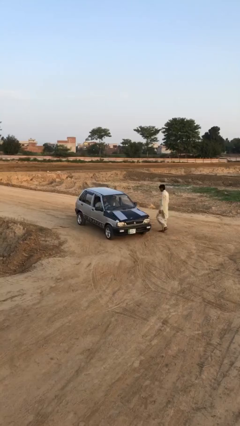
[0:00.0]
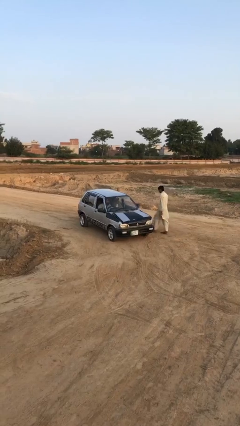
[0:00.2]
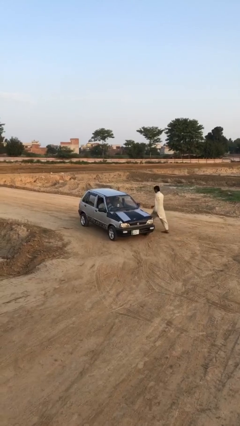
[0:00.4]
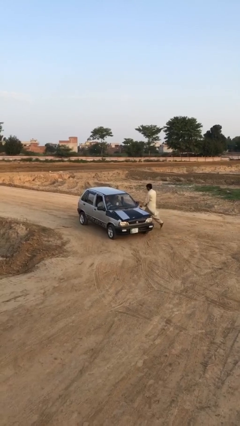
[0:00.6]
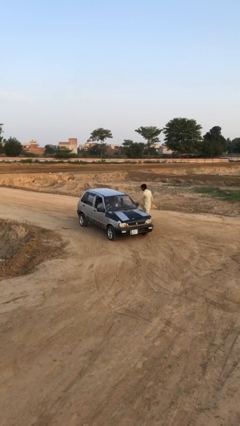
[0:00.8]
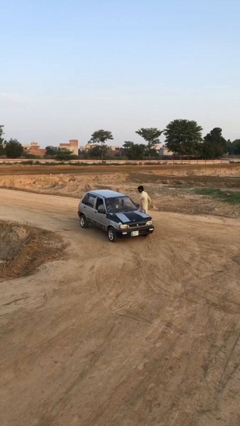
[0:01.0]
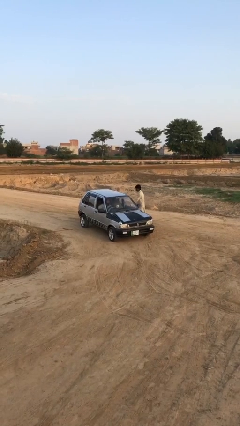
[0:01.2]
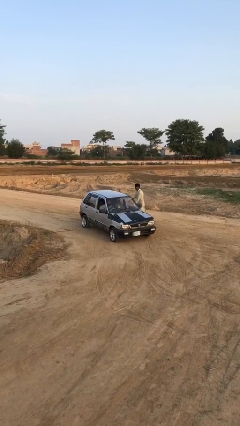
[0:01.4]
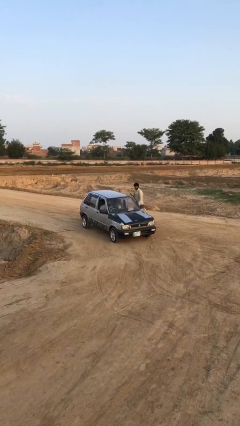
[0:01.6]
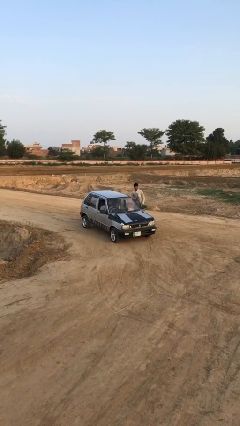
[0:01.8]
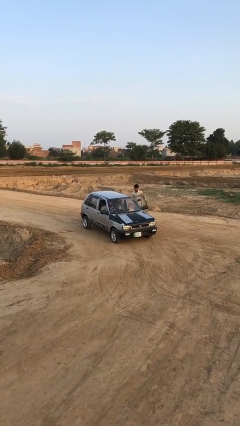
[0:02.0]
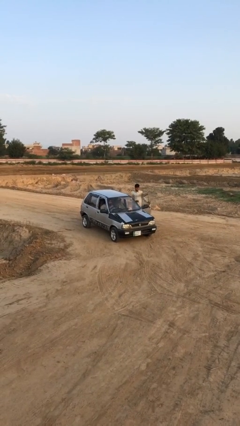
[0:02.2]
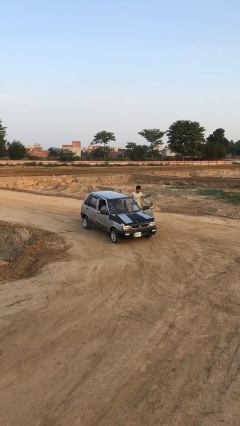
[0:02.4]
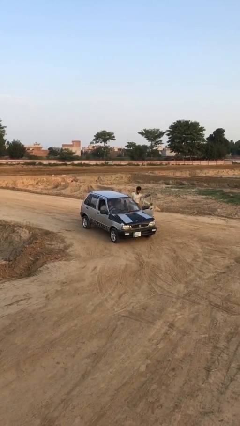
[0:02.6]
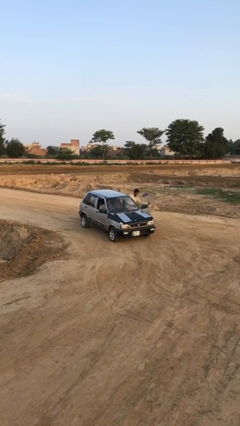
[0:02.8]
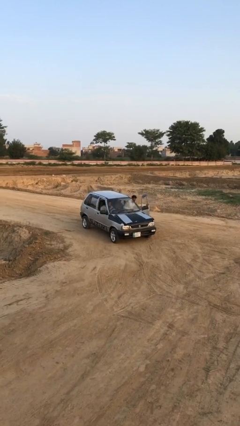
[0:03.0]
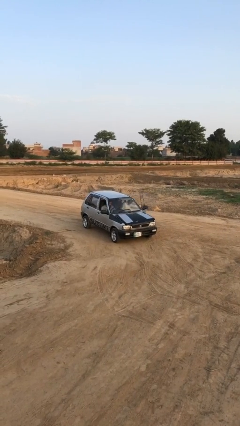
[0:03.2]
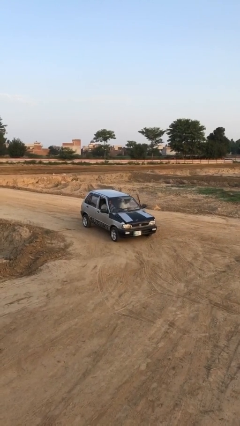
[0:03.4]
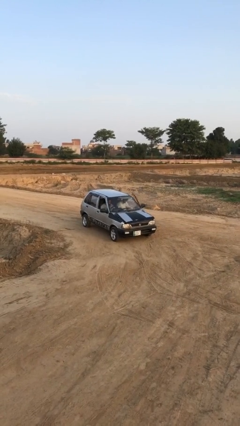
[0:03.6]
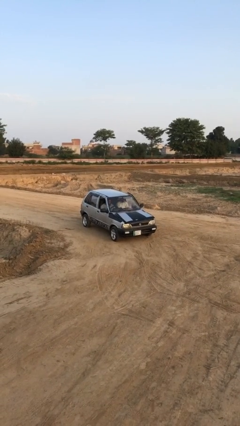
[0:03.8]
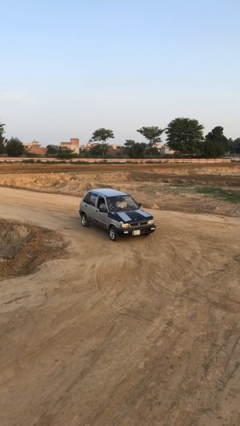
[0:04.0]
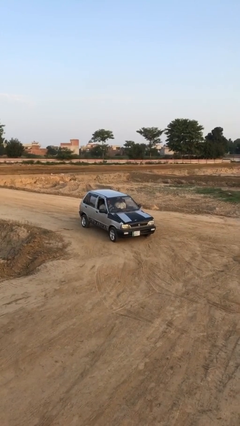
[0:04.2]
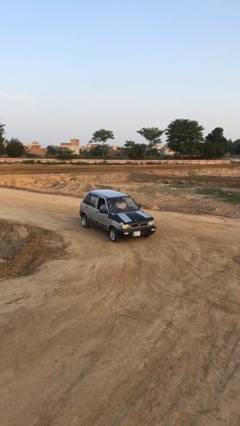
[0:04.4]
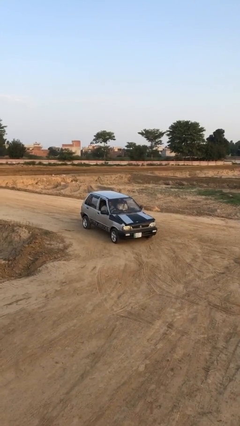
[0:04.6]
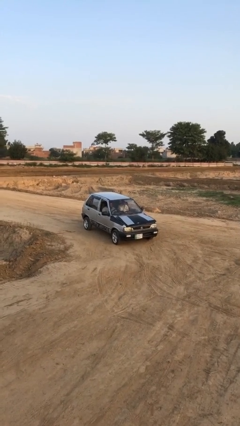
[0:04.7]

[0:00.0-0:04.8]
car picks up person

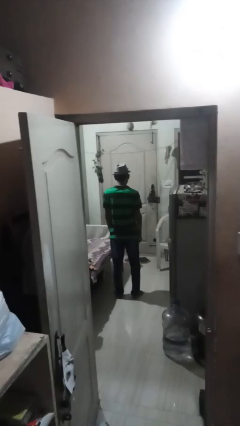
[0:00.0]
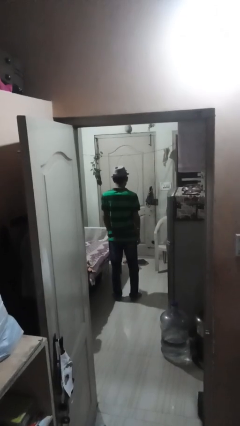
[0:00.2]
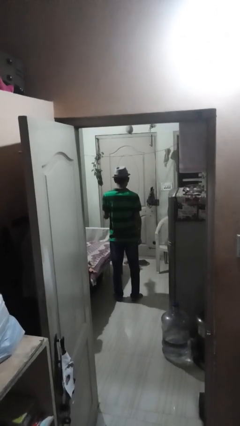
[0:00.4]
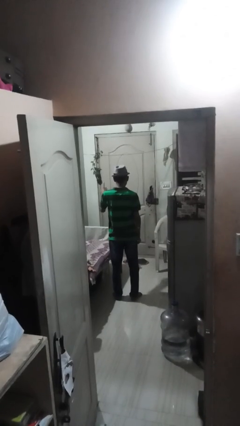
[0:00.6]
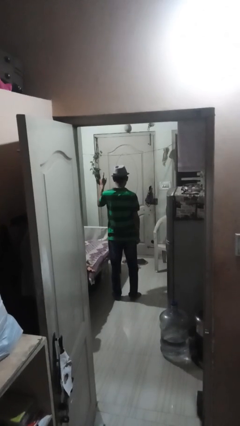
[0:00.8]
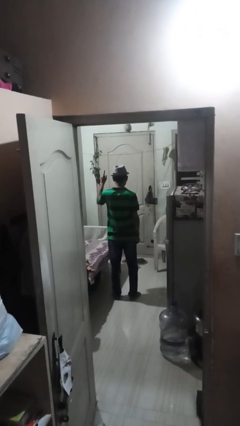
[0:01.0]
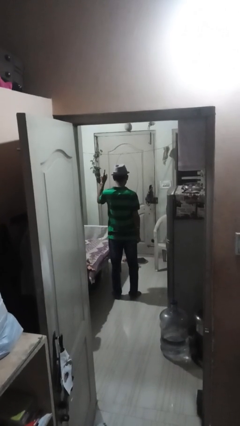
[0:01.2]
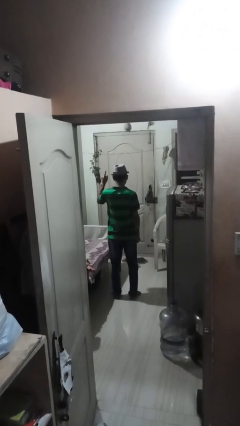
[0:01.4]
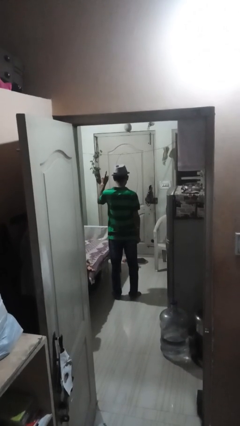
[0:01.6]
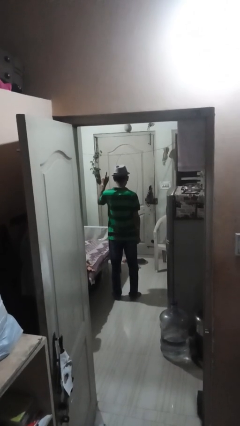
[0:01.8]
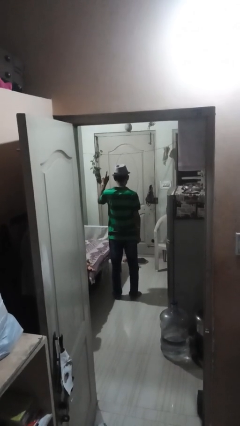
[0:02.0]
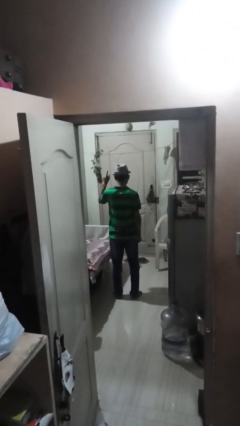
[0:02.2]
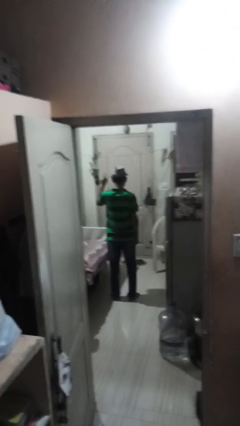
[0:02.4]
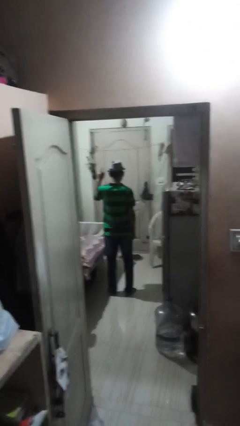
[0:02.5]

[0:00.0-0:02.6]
person gestures number one

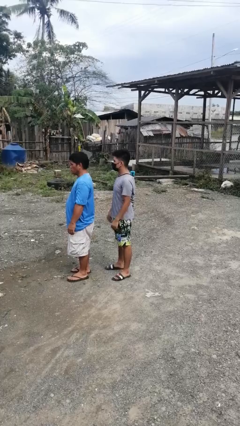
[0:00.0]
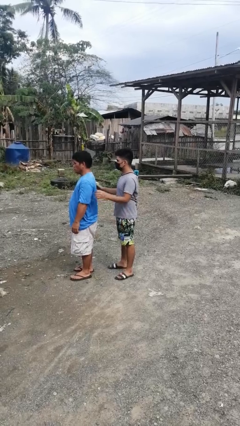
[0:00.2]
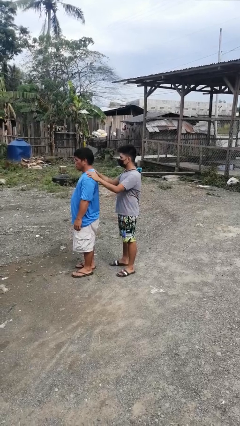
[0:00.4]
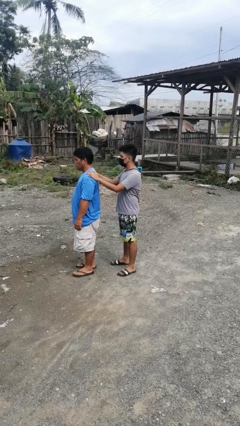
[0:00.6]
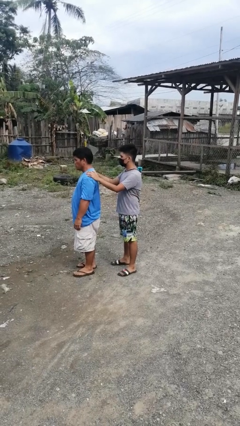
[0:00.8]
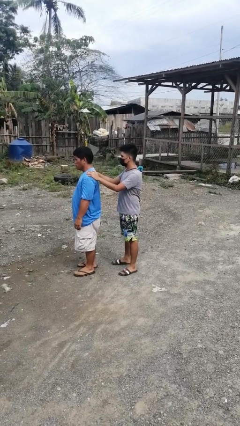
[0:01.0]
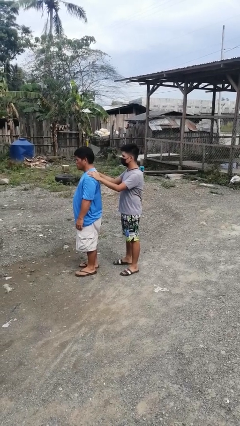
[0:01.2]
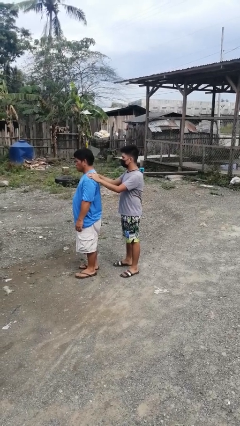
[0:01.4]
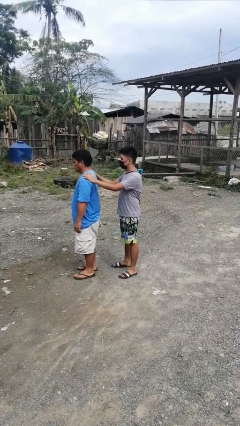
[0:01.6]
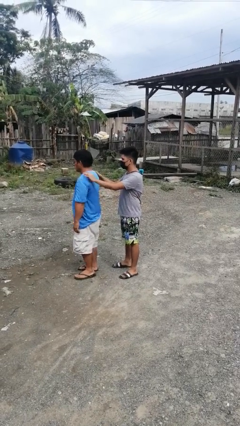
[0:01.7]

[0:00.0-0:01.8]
person grabs person by shoulder

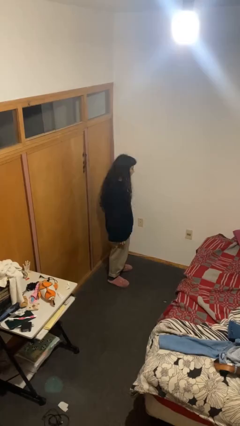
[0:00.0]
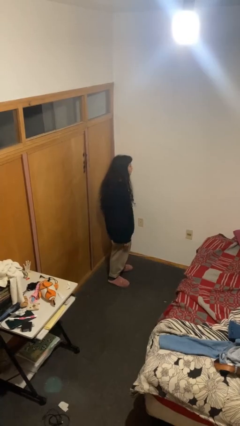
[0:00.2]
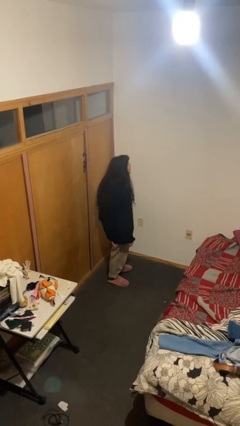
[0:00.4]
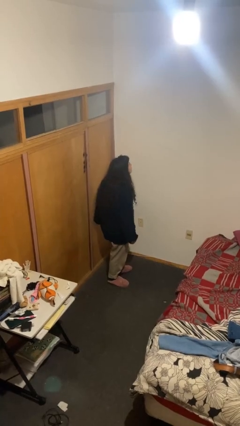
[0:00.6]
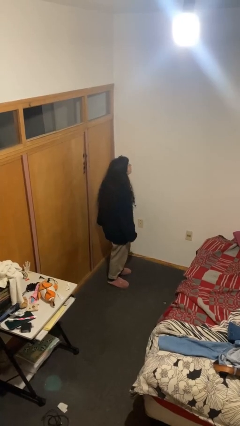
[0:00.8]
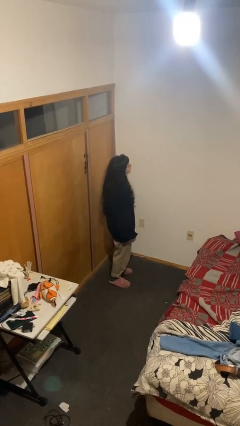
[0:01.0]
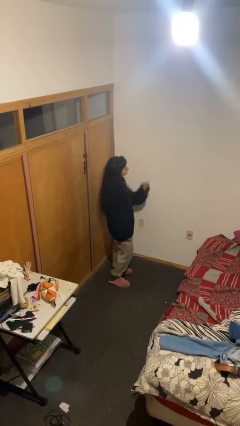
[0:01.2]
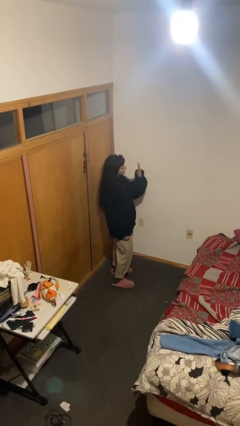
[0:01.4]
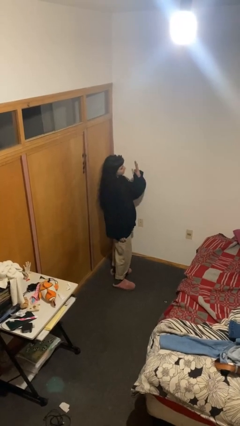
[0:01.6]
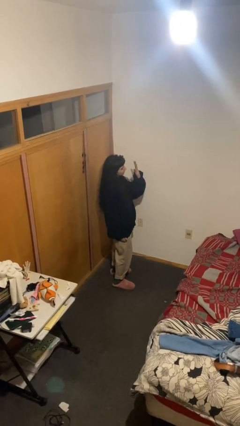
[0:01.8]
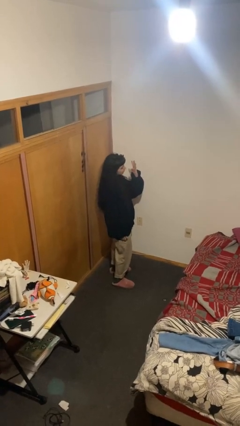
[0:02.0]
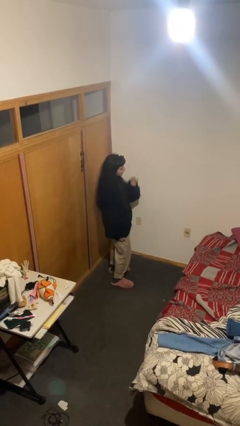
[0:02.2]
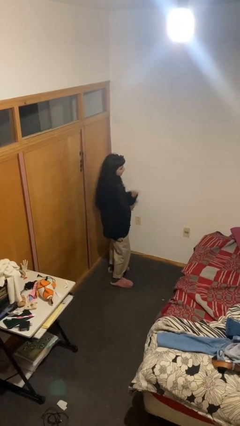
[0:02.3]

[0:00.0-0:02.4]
person gestures number four

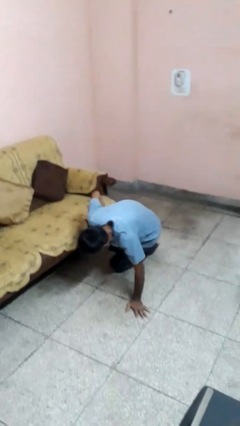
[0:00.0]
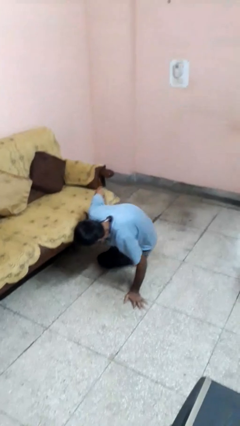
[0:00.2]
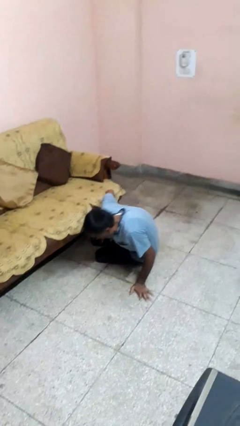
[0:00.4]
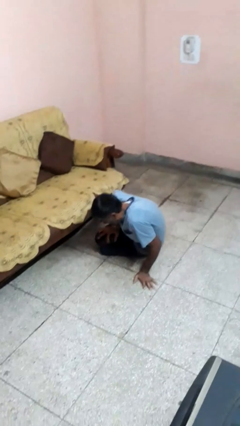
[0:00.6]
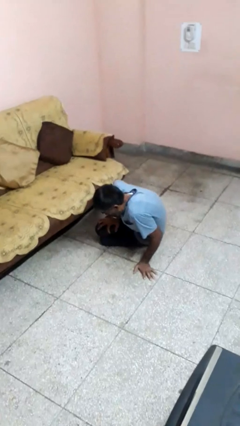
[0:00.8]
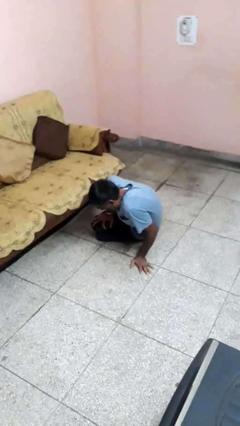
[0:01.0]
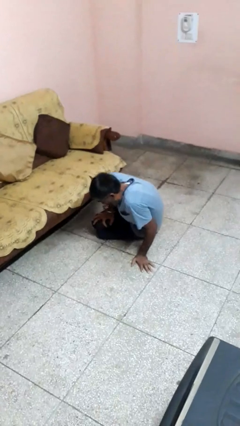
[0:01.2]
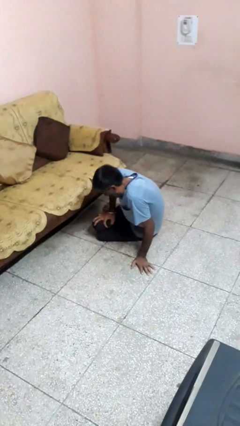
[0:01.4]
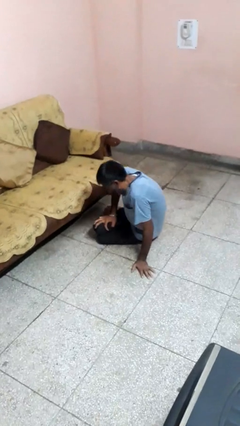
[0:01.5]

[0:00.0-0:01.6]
person lies down on floor

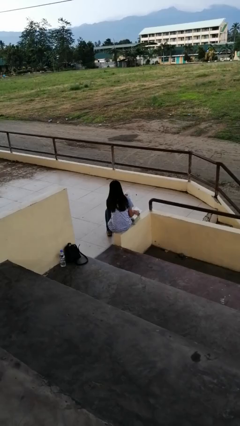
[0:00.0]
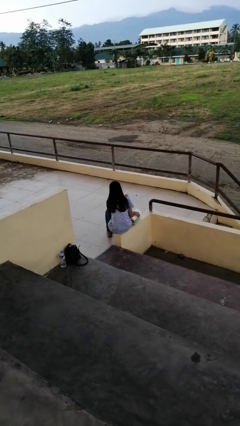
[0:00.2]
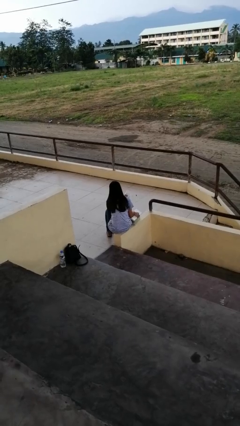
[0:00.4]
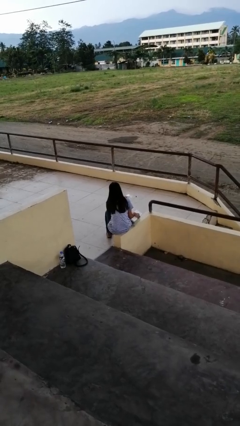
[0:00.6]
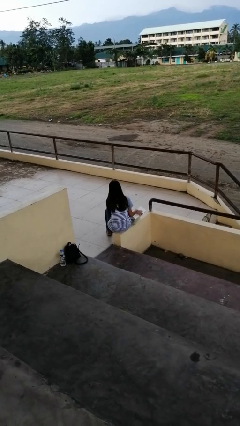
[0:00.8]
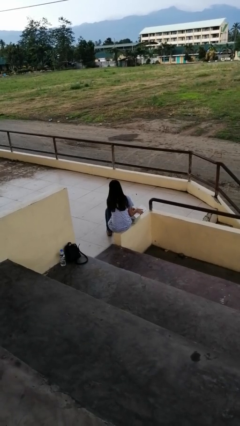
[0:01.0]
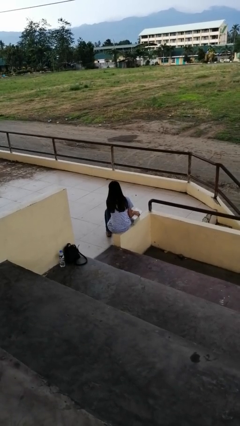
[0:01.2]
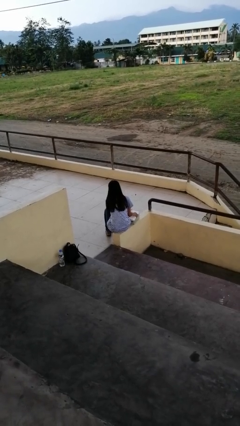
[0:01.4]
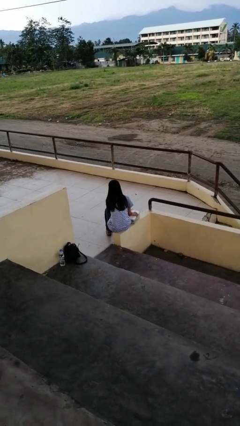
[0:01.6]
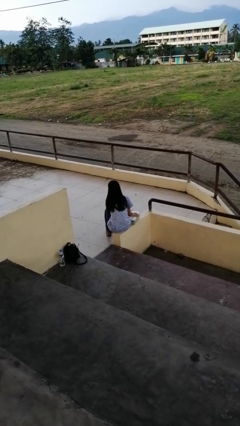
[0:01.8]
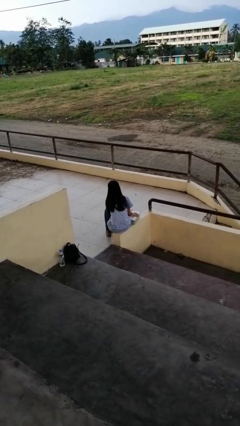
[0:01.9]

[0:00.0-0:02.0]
person puts object into box

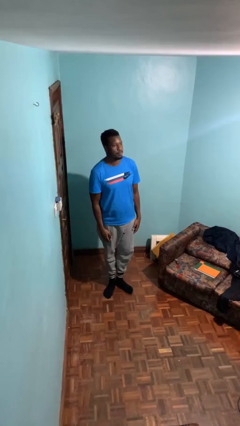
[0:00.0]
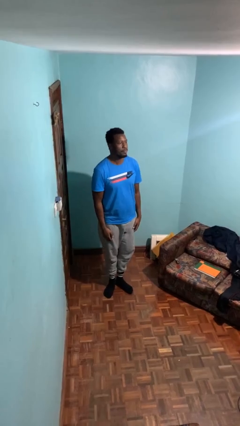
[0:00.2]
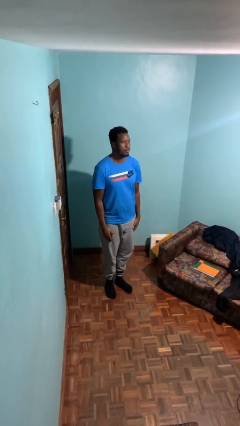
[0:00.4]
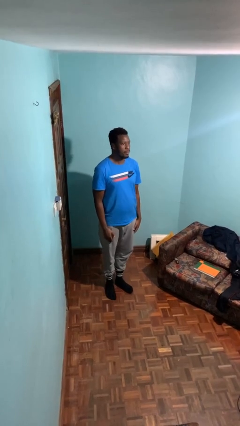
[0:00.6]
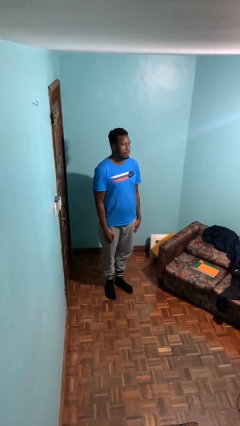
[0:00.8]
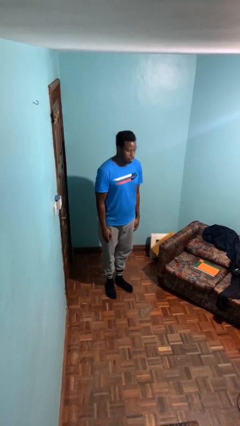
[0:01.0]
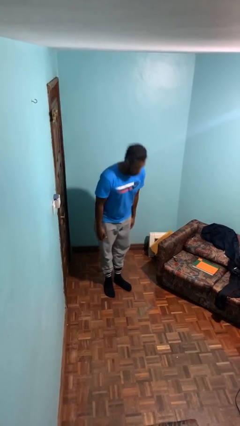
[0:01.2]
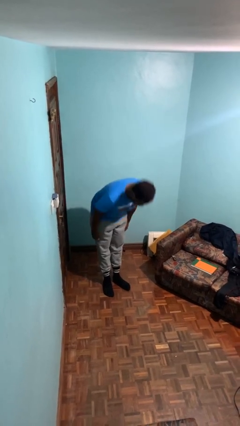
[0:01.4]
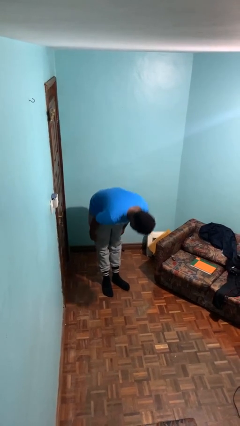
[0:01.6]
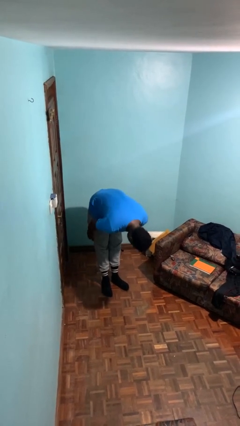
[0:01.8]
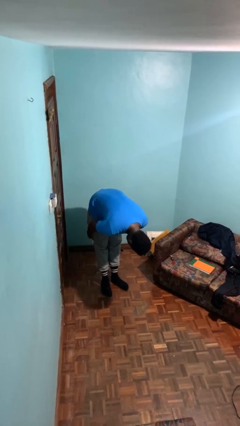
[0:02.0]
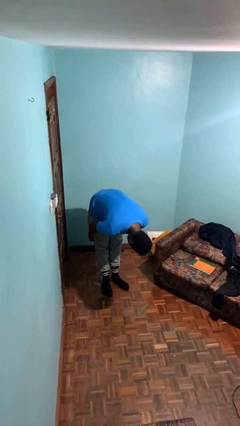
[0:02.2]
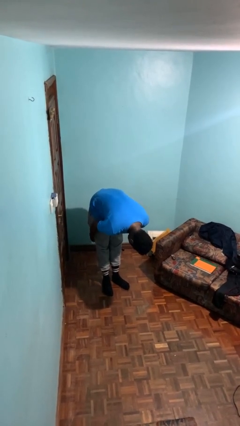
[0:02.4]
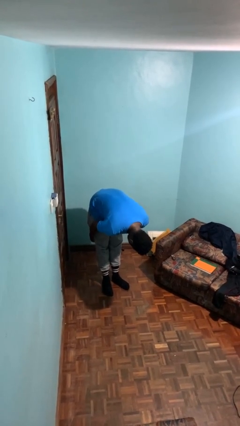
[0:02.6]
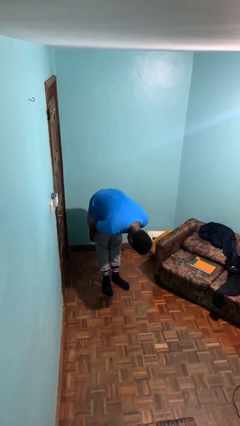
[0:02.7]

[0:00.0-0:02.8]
person bows
